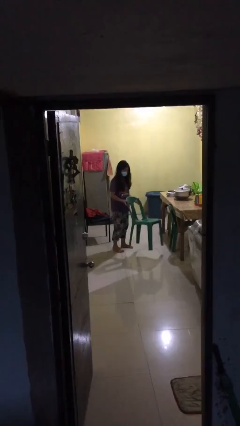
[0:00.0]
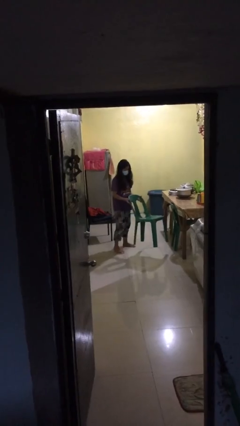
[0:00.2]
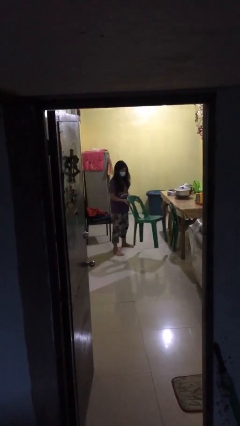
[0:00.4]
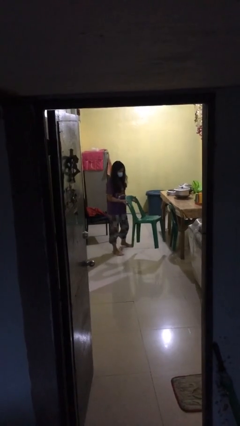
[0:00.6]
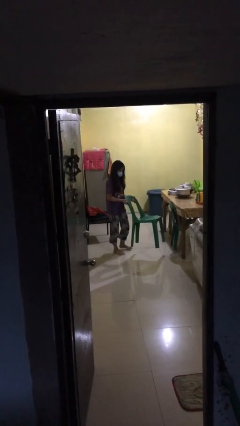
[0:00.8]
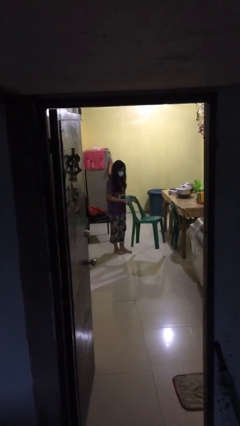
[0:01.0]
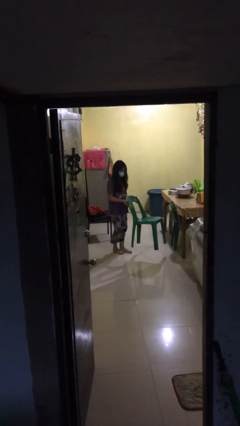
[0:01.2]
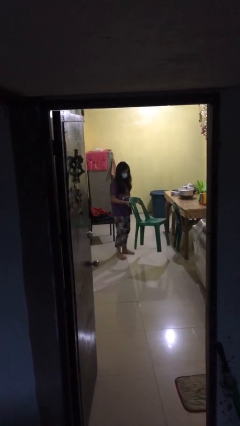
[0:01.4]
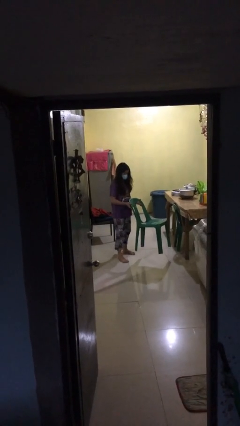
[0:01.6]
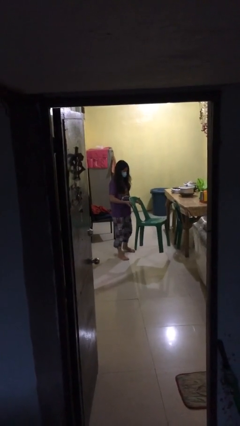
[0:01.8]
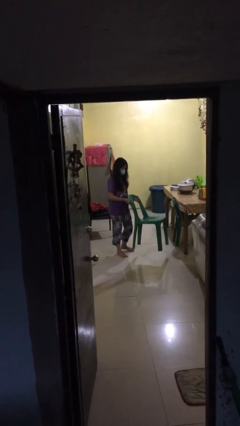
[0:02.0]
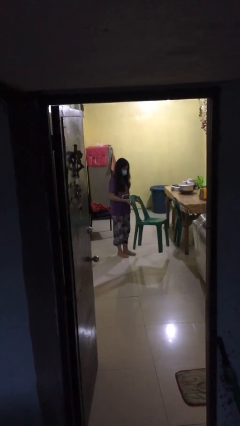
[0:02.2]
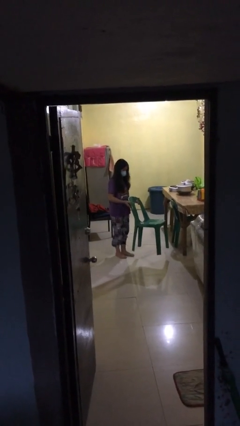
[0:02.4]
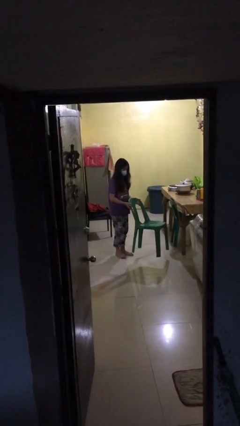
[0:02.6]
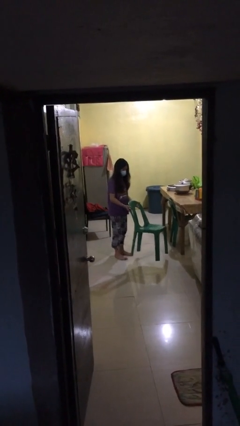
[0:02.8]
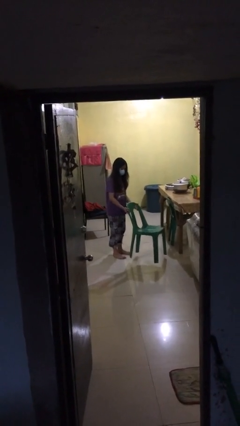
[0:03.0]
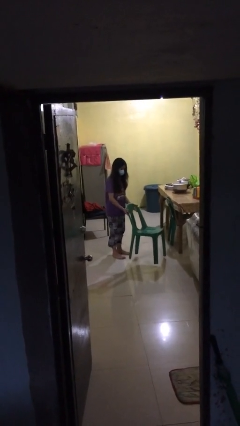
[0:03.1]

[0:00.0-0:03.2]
person carries heavy object

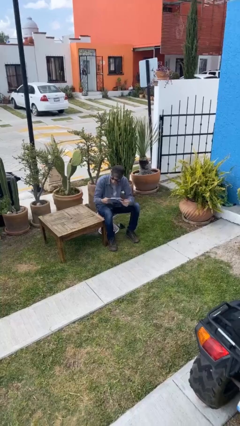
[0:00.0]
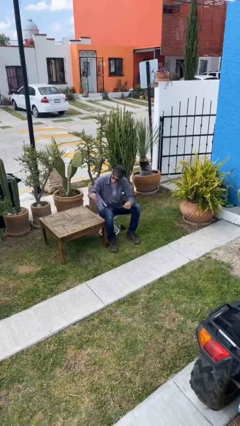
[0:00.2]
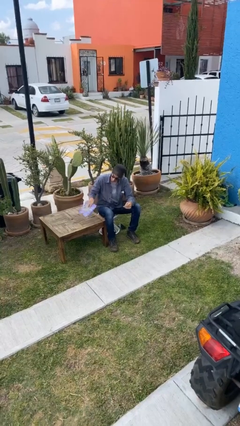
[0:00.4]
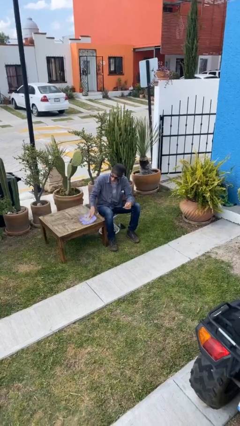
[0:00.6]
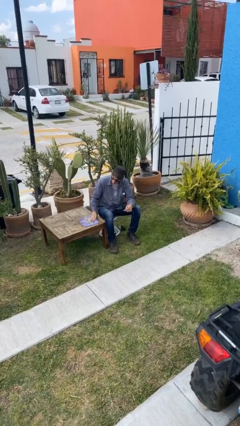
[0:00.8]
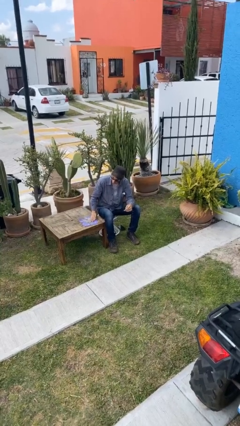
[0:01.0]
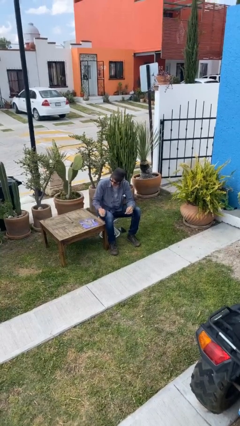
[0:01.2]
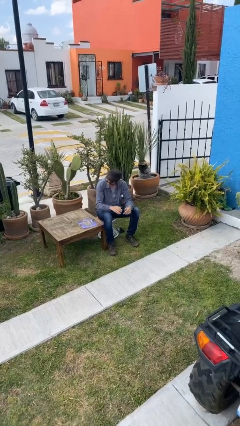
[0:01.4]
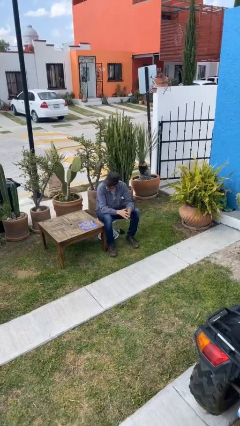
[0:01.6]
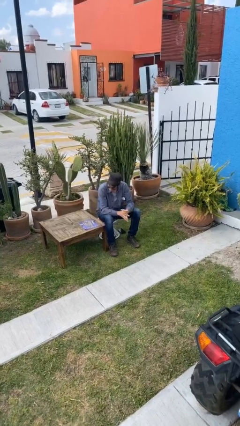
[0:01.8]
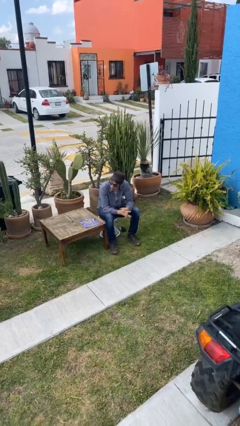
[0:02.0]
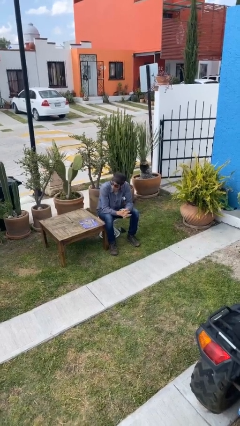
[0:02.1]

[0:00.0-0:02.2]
person puts down object on table

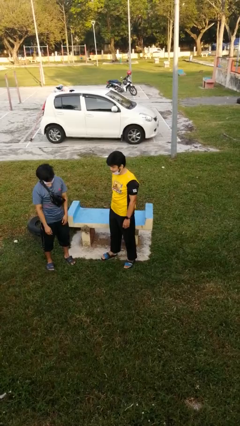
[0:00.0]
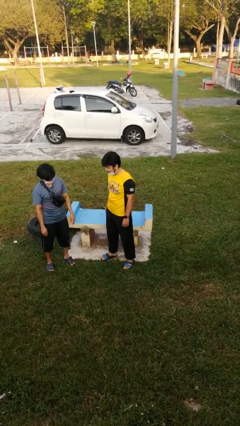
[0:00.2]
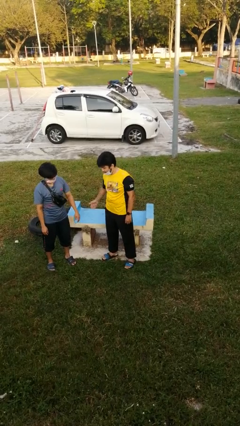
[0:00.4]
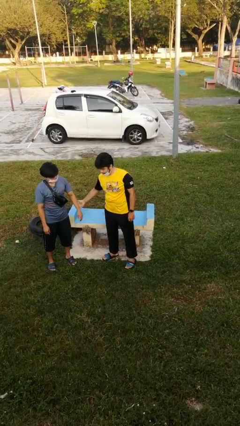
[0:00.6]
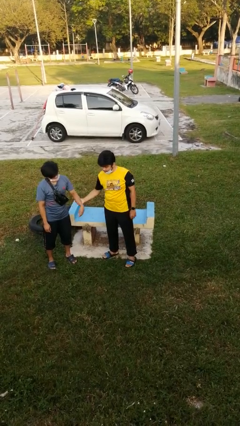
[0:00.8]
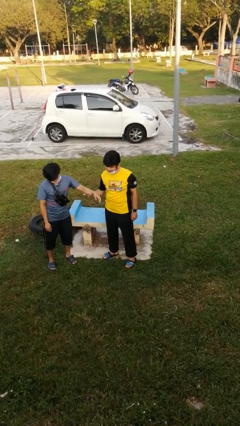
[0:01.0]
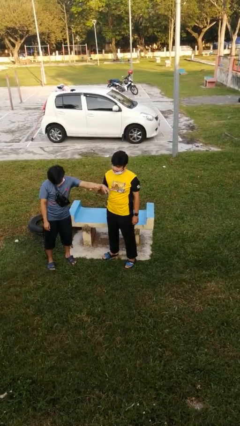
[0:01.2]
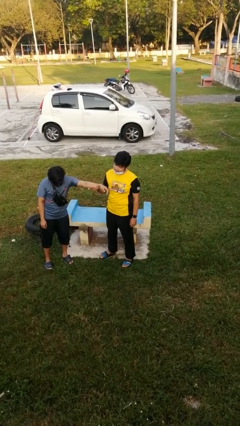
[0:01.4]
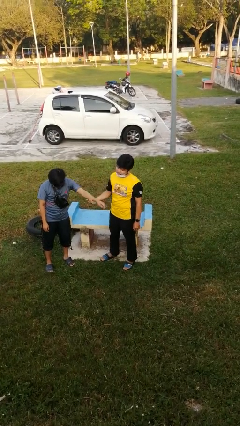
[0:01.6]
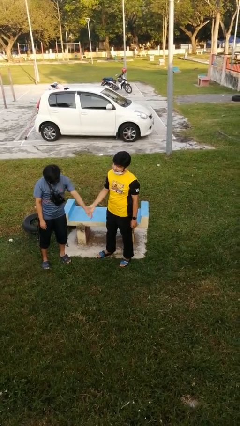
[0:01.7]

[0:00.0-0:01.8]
person grabs person by forearm

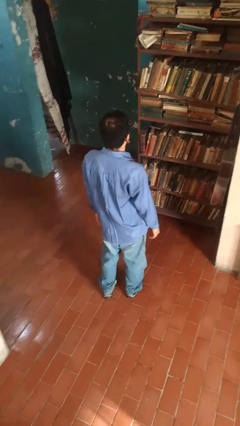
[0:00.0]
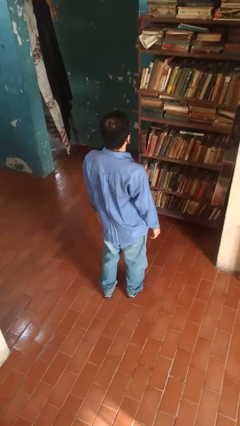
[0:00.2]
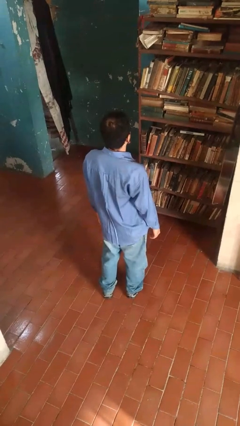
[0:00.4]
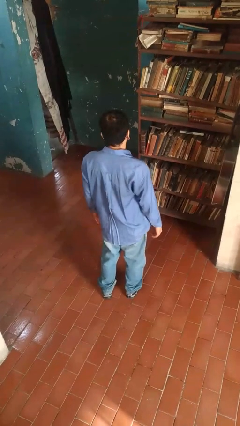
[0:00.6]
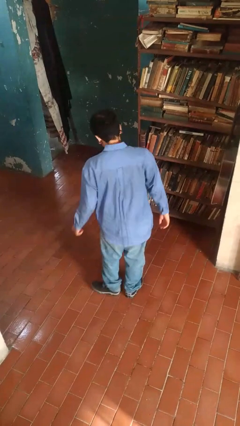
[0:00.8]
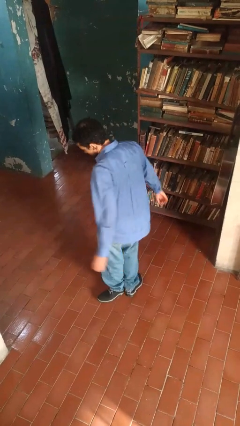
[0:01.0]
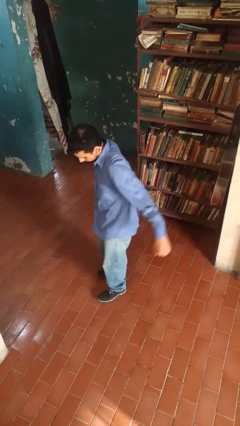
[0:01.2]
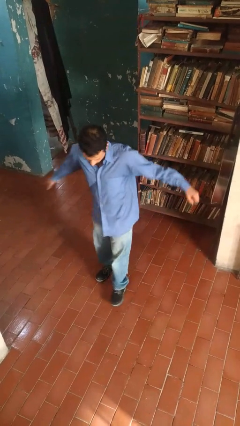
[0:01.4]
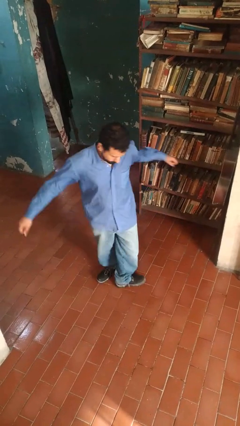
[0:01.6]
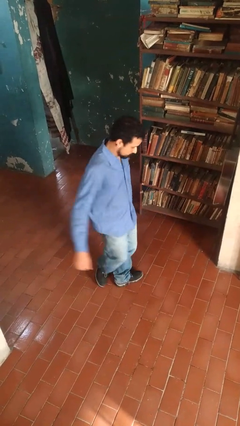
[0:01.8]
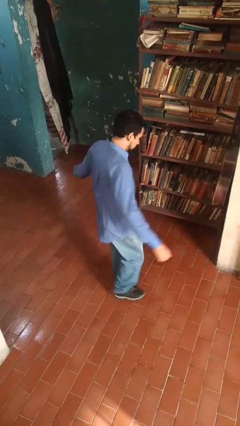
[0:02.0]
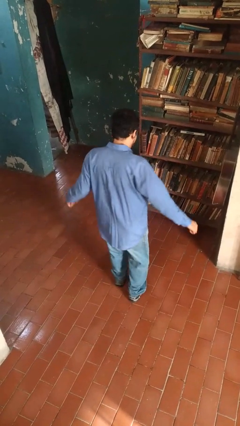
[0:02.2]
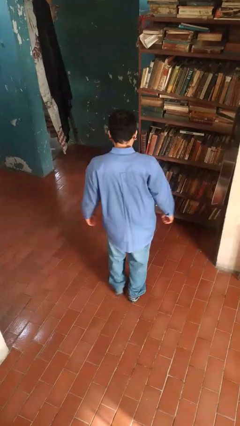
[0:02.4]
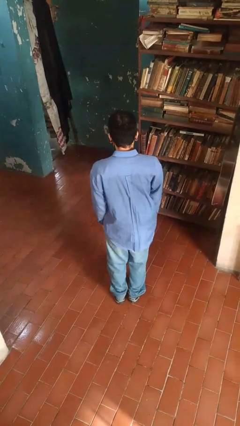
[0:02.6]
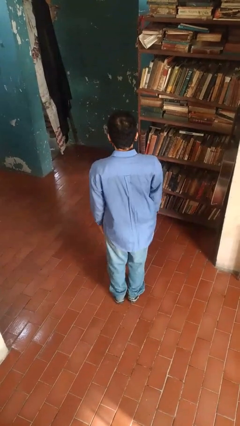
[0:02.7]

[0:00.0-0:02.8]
person twirls

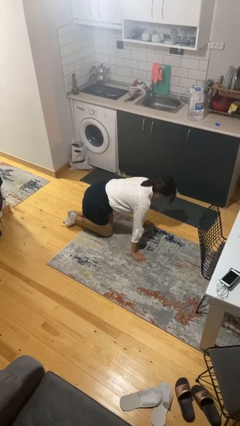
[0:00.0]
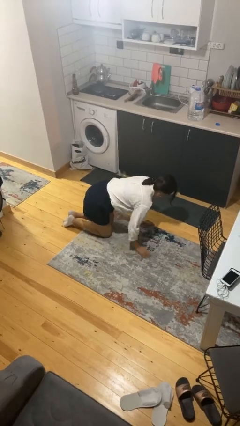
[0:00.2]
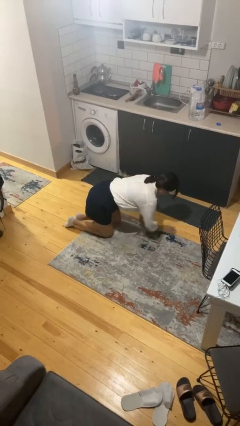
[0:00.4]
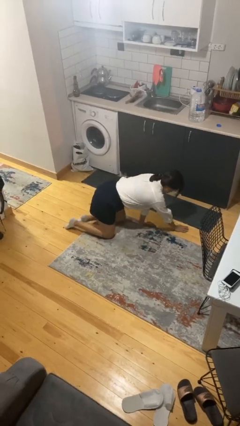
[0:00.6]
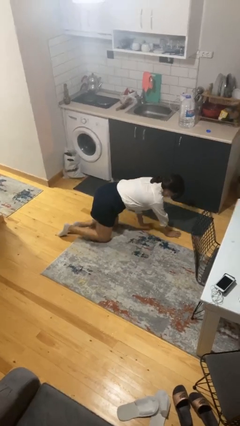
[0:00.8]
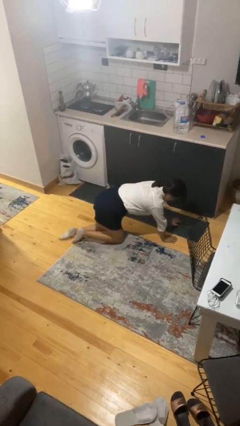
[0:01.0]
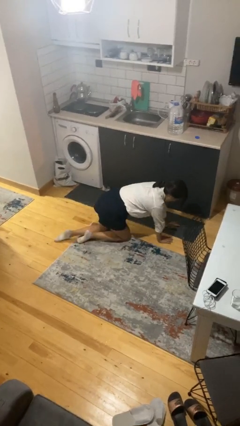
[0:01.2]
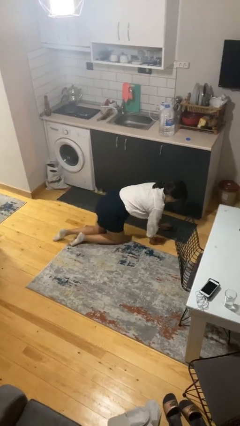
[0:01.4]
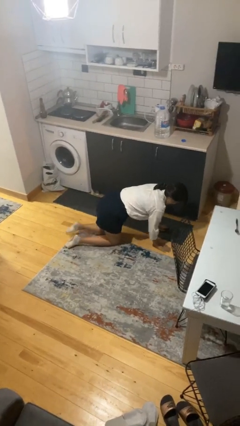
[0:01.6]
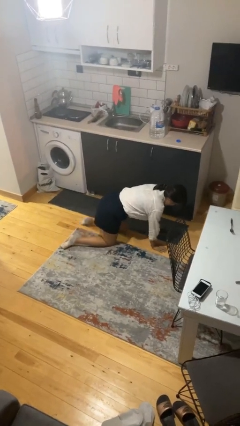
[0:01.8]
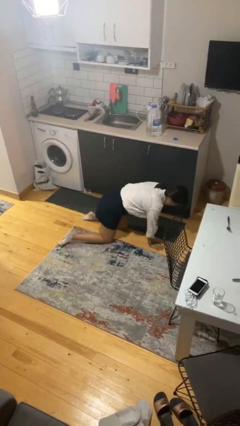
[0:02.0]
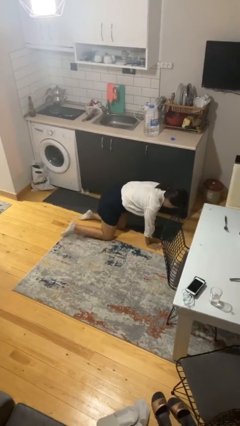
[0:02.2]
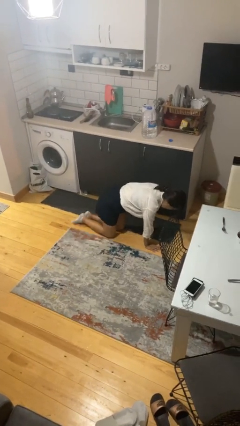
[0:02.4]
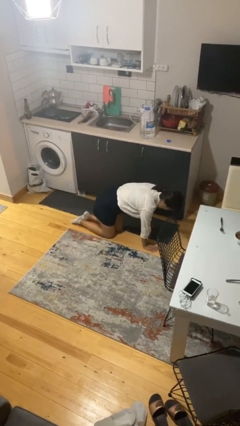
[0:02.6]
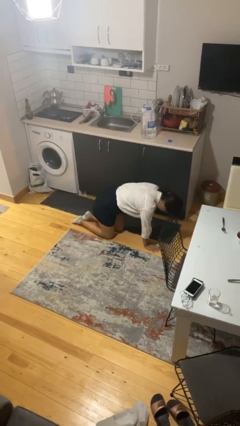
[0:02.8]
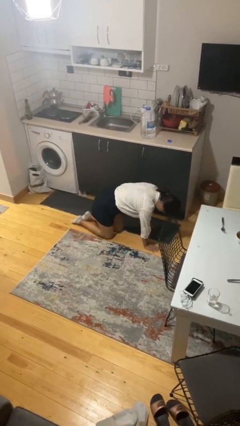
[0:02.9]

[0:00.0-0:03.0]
person crawls

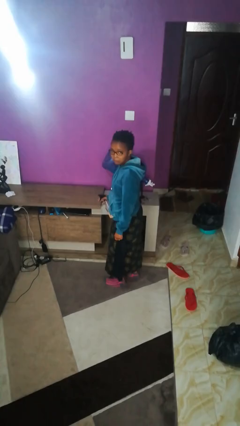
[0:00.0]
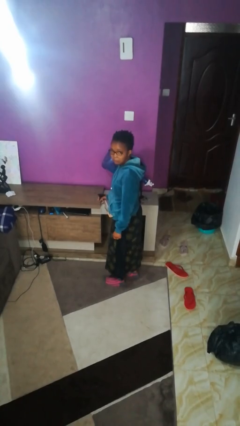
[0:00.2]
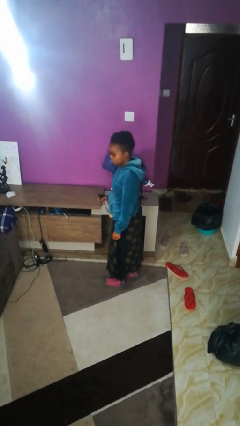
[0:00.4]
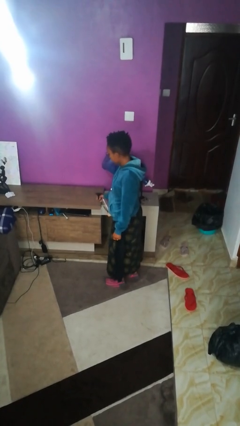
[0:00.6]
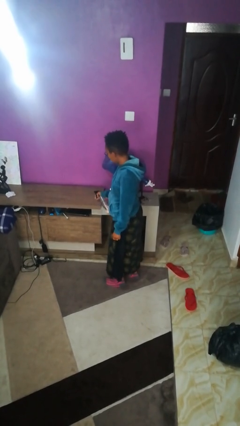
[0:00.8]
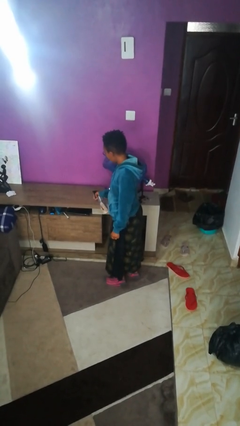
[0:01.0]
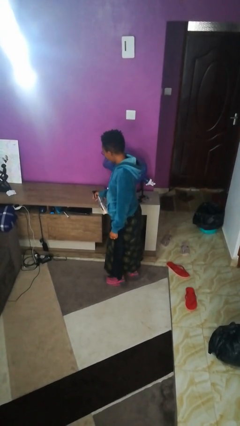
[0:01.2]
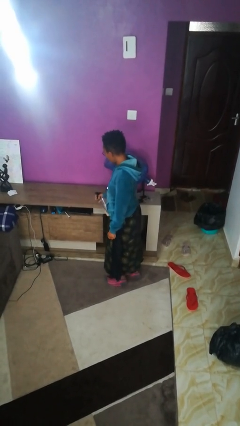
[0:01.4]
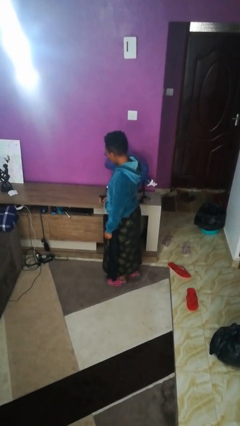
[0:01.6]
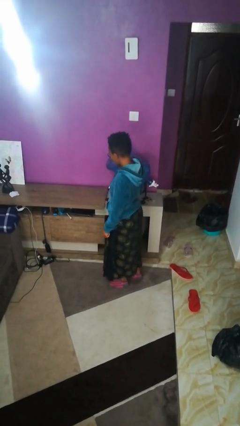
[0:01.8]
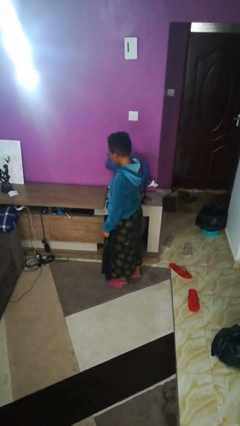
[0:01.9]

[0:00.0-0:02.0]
person sprays from bottle

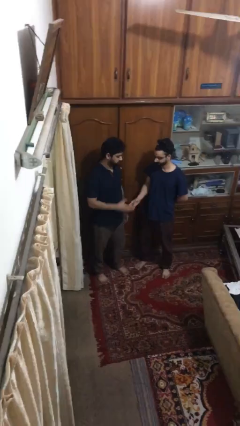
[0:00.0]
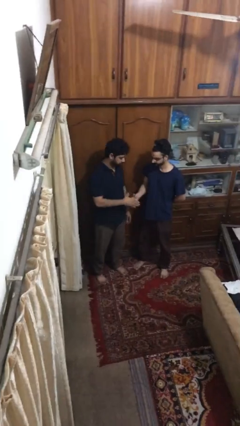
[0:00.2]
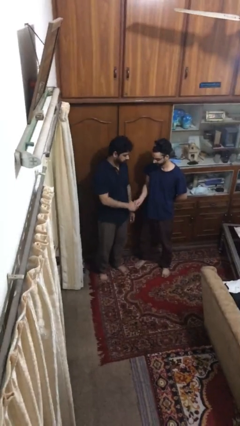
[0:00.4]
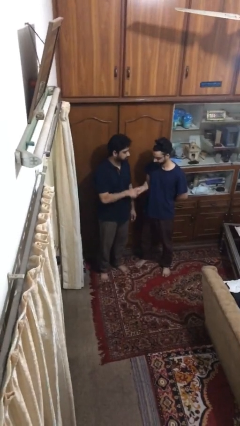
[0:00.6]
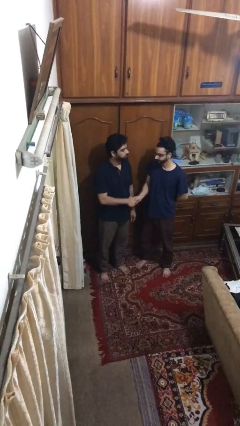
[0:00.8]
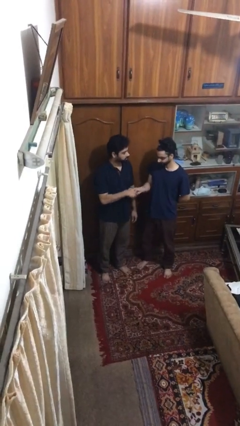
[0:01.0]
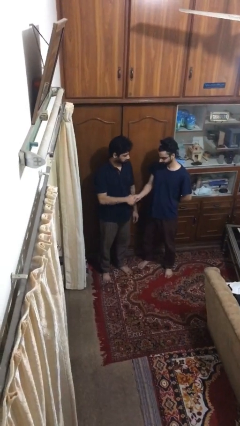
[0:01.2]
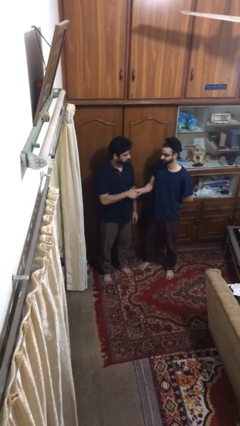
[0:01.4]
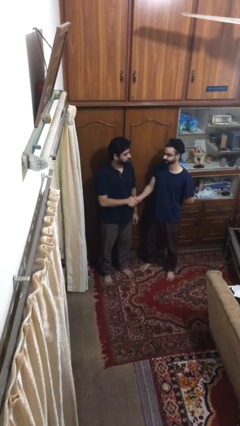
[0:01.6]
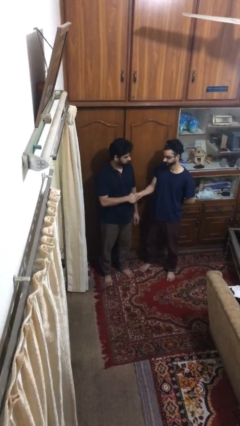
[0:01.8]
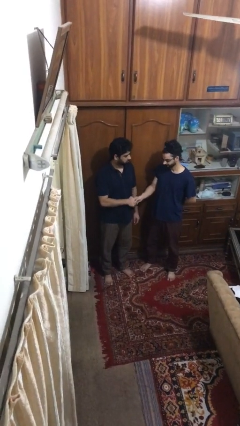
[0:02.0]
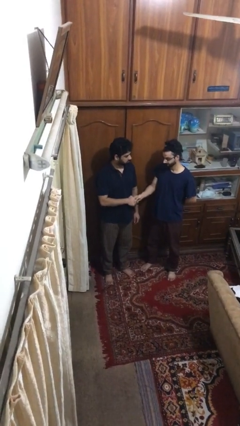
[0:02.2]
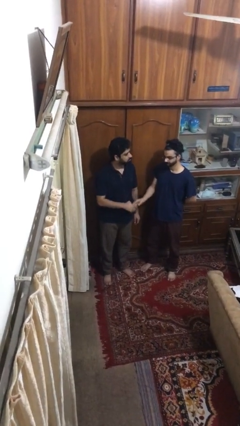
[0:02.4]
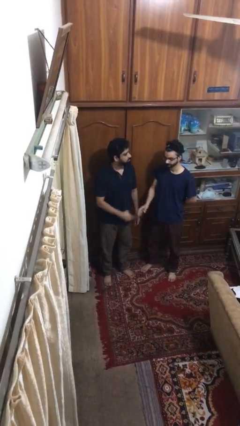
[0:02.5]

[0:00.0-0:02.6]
person shakes hand
